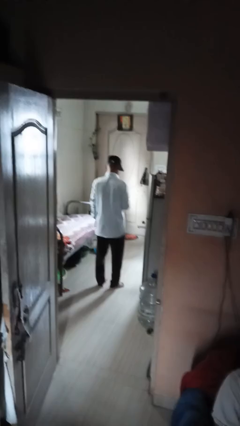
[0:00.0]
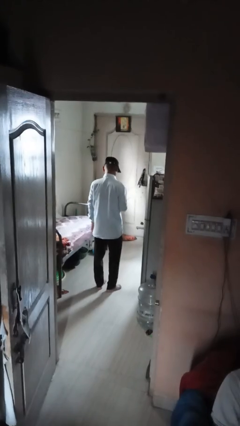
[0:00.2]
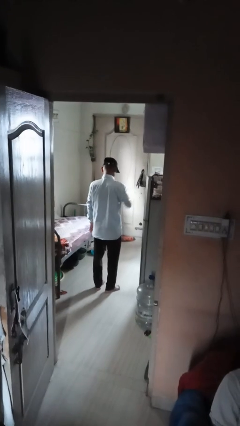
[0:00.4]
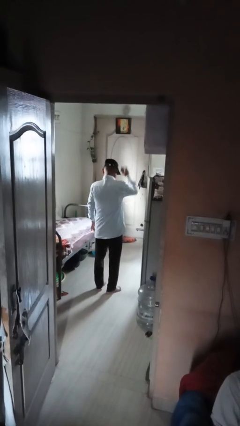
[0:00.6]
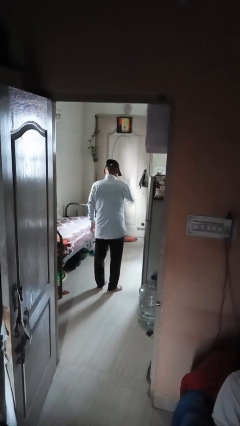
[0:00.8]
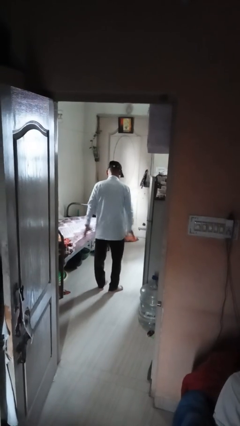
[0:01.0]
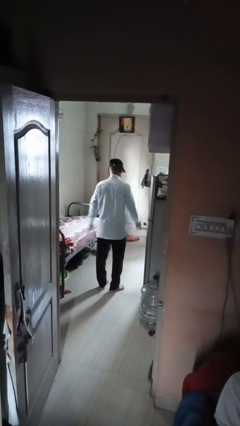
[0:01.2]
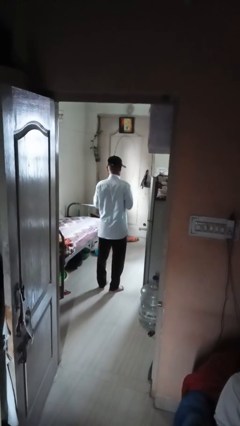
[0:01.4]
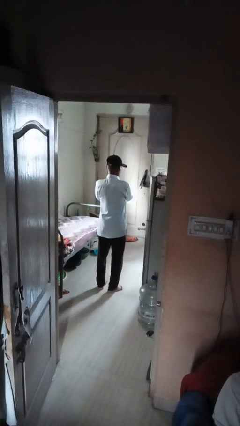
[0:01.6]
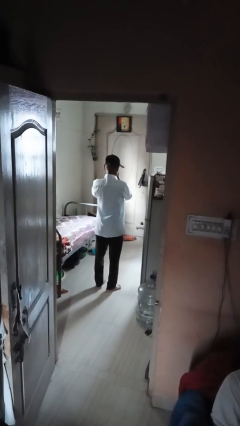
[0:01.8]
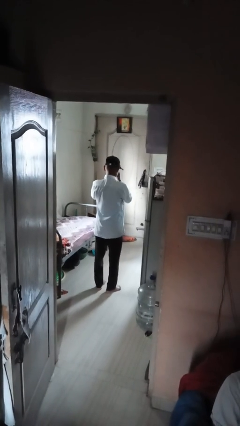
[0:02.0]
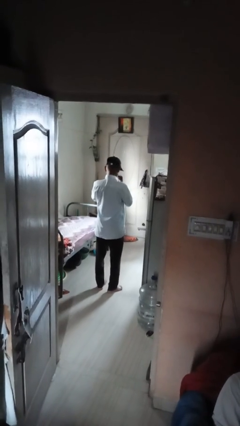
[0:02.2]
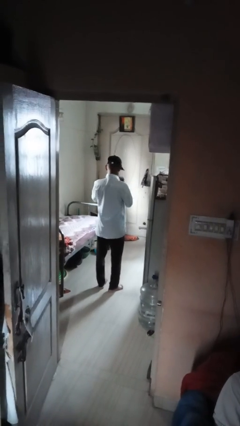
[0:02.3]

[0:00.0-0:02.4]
person bounces ball on floor

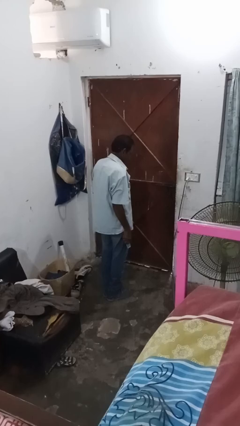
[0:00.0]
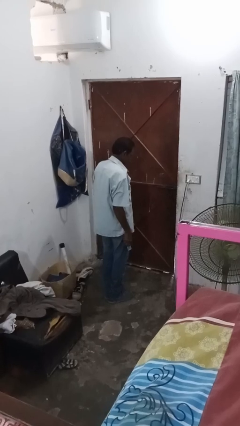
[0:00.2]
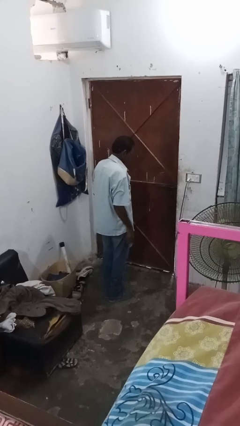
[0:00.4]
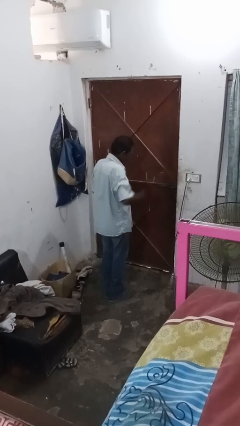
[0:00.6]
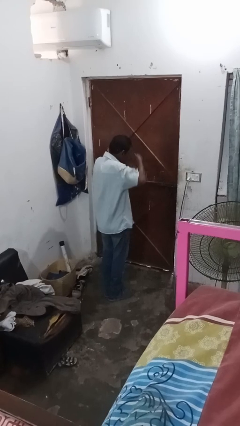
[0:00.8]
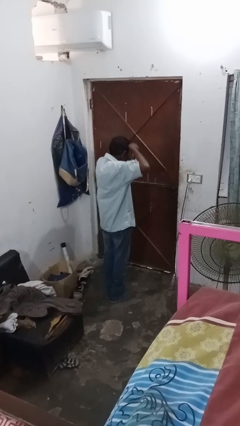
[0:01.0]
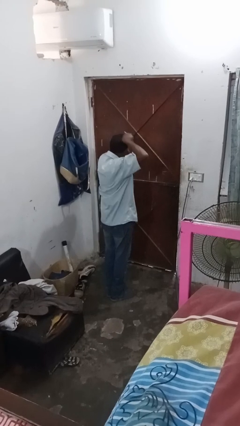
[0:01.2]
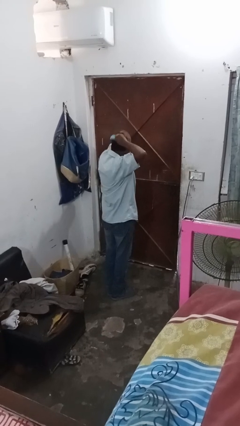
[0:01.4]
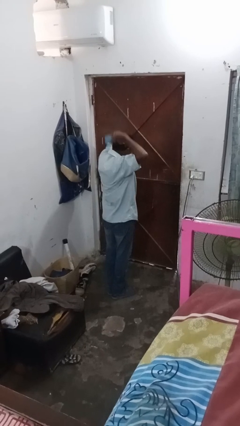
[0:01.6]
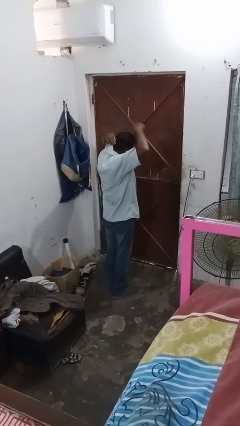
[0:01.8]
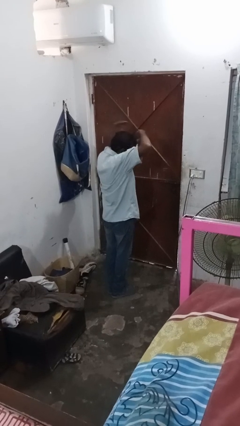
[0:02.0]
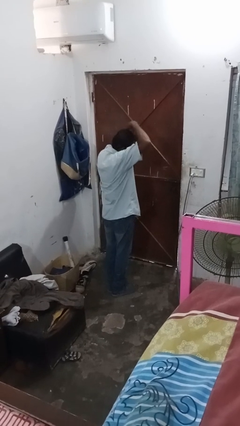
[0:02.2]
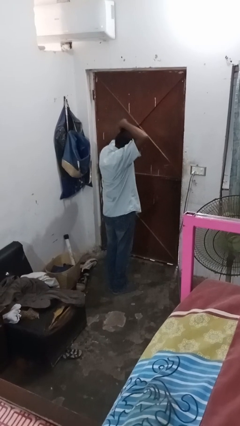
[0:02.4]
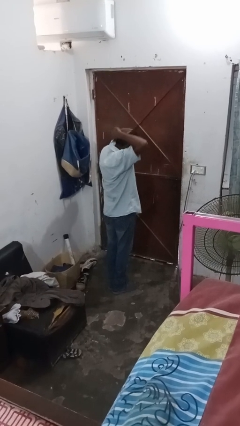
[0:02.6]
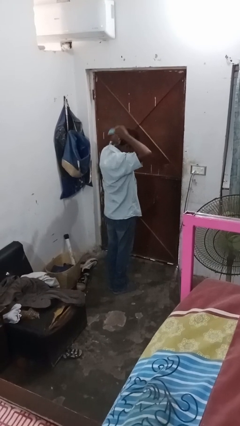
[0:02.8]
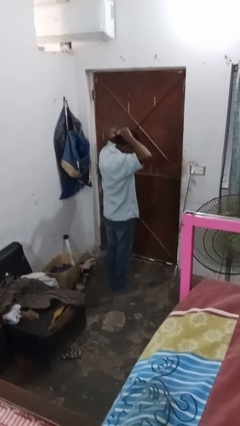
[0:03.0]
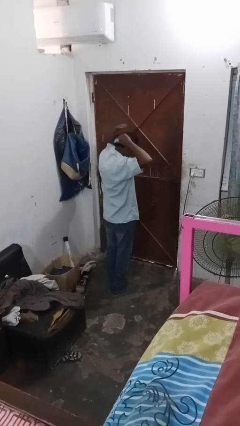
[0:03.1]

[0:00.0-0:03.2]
person brushes hair

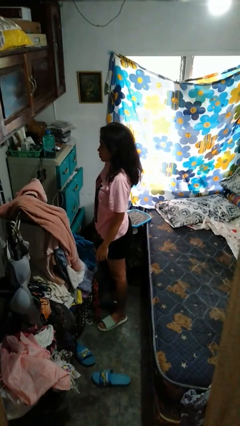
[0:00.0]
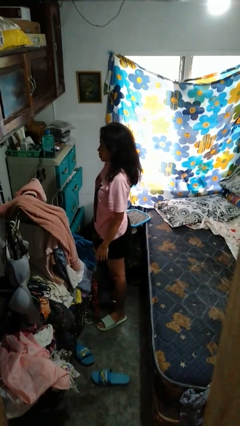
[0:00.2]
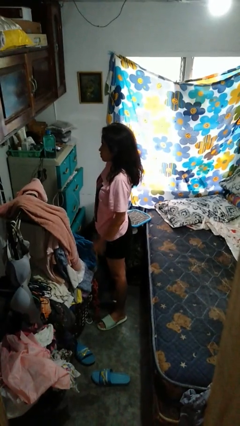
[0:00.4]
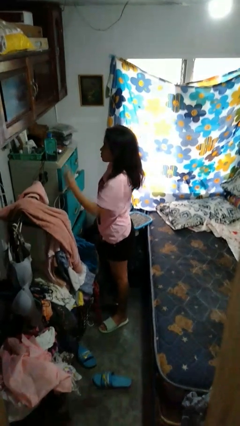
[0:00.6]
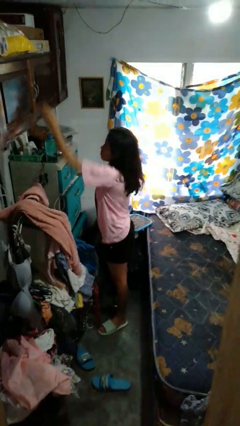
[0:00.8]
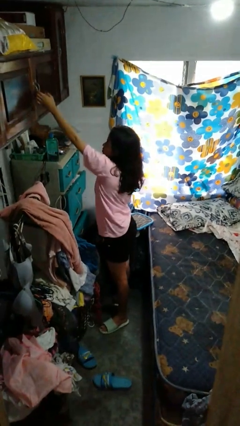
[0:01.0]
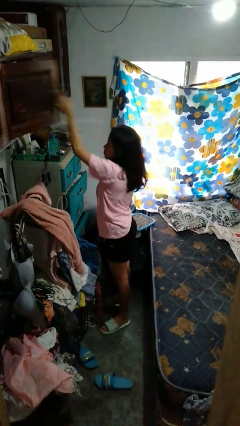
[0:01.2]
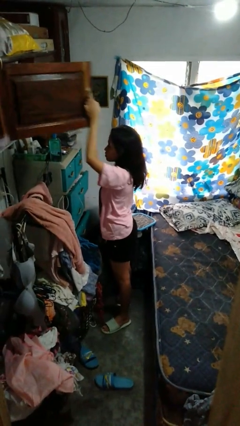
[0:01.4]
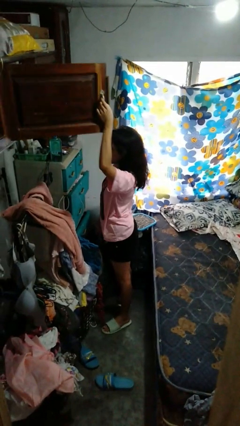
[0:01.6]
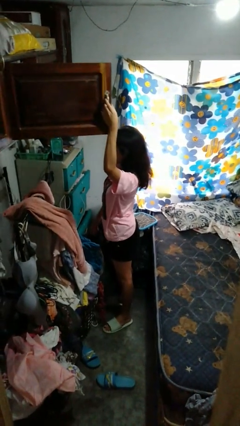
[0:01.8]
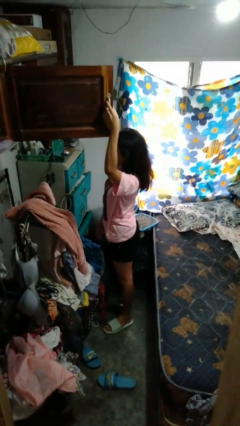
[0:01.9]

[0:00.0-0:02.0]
person opens closet door

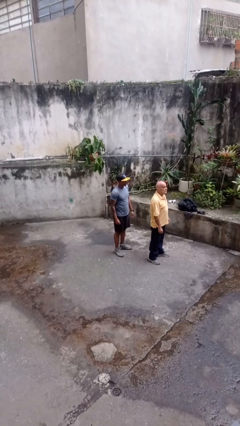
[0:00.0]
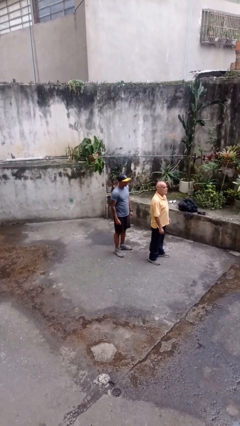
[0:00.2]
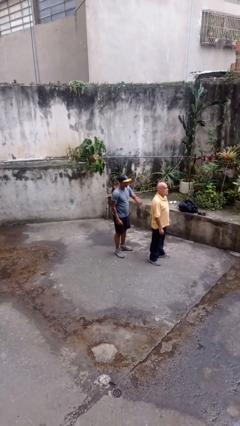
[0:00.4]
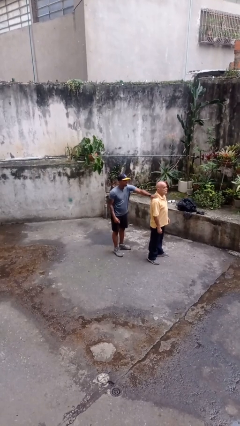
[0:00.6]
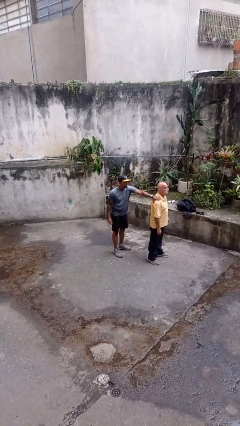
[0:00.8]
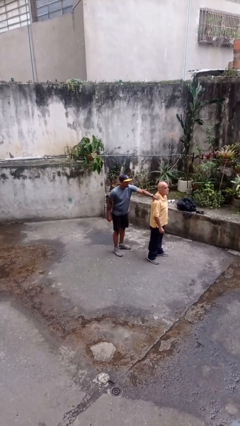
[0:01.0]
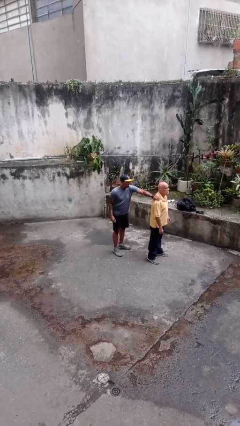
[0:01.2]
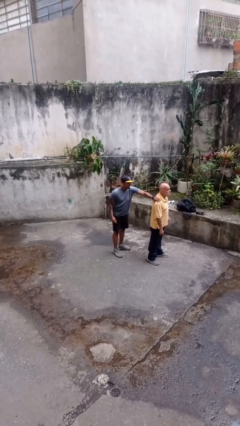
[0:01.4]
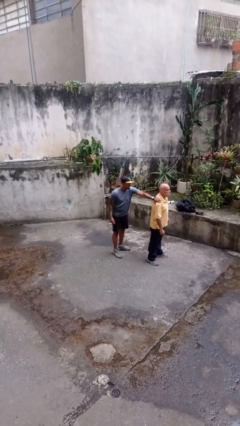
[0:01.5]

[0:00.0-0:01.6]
person grabs person by shoulder

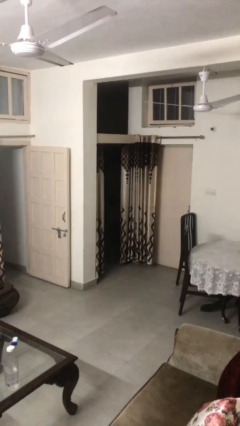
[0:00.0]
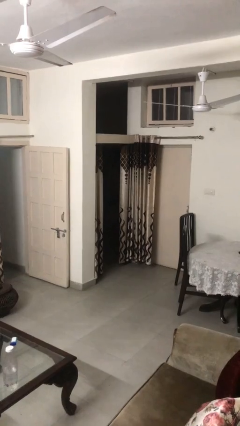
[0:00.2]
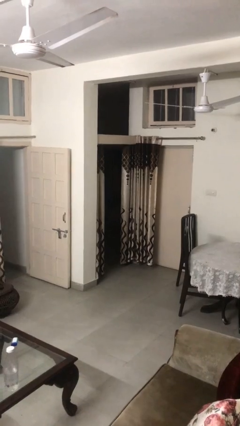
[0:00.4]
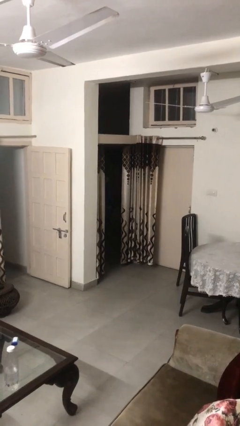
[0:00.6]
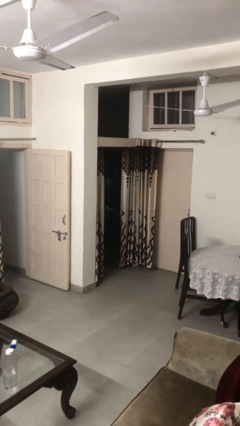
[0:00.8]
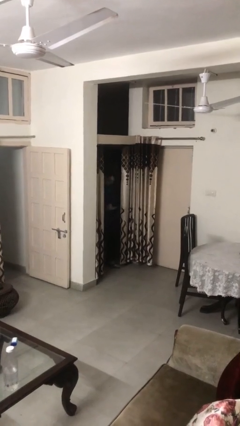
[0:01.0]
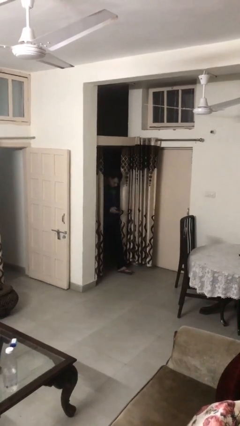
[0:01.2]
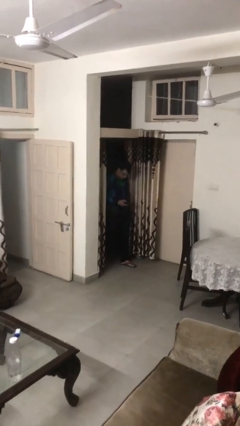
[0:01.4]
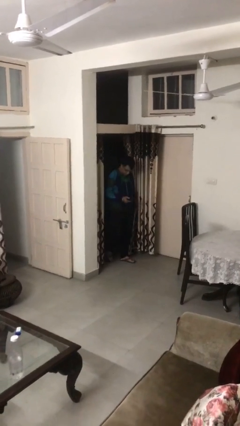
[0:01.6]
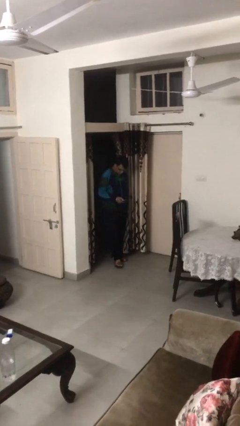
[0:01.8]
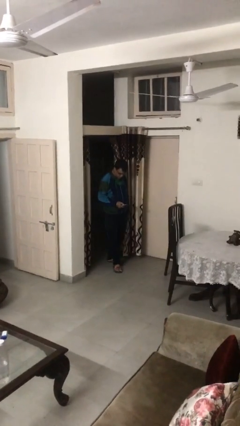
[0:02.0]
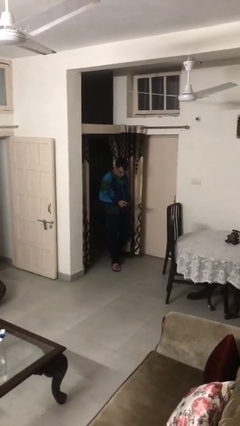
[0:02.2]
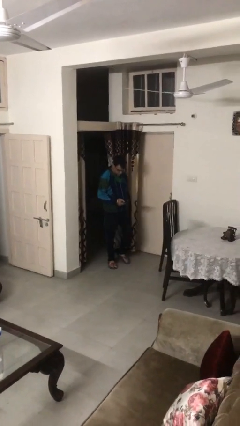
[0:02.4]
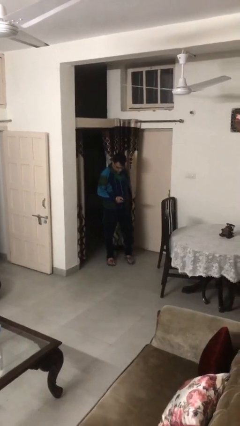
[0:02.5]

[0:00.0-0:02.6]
person enters scene through structure

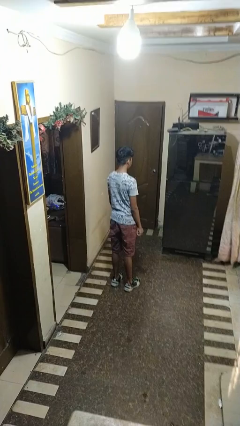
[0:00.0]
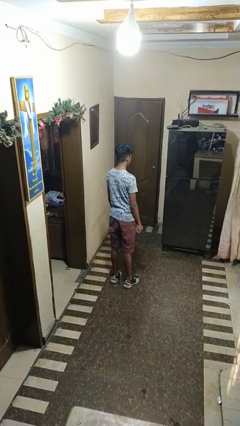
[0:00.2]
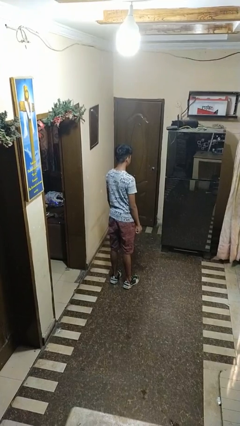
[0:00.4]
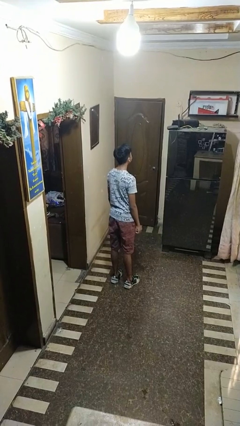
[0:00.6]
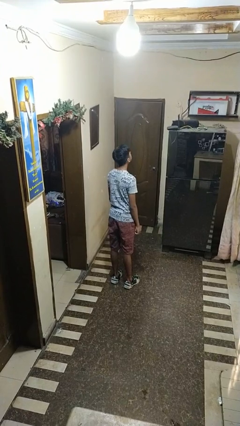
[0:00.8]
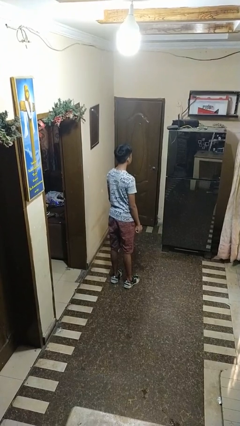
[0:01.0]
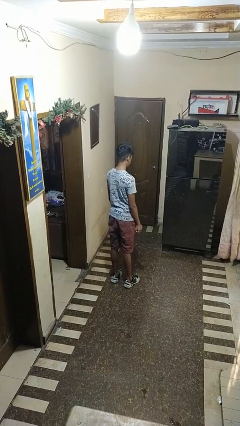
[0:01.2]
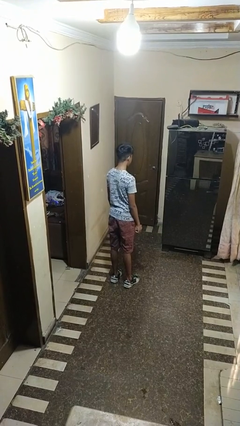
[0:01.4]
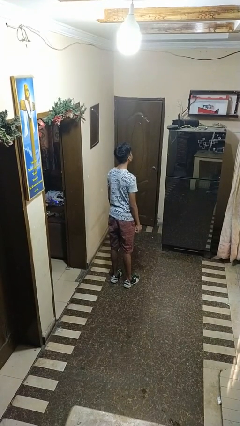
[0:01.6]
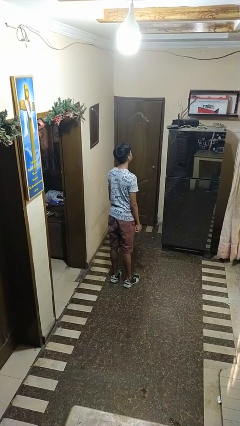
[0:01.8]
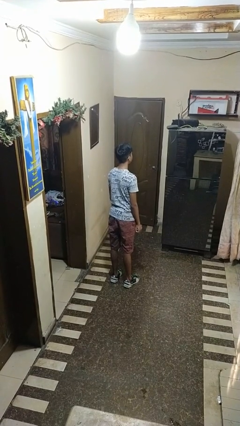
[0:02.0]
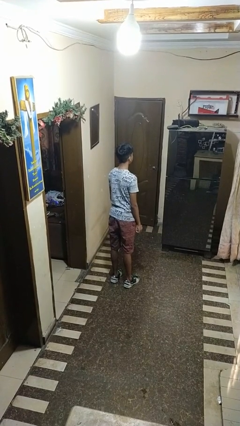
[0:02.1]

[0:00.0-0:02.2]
person shakes head

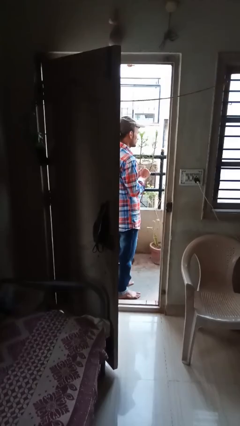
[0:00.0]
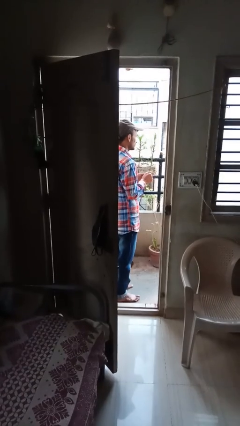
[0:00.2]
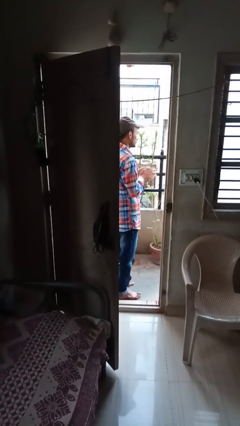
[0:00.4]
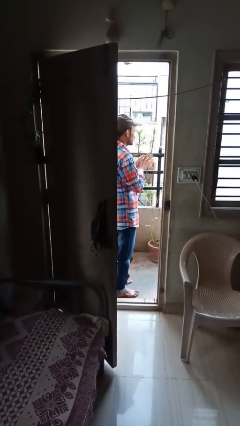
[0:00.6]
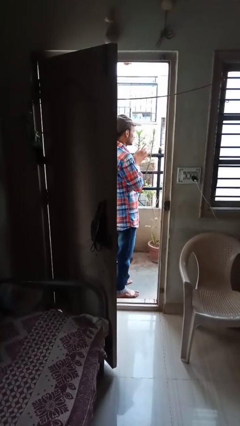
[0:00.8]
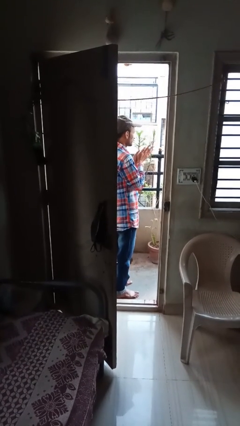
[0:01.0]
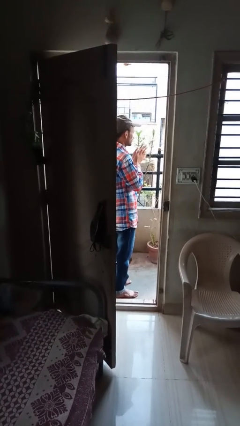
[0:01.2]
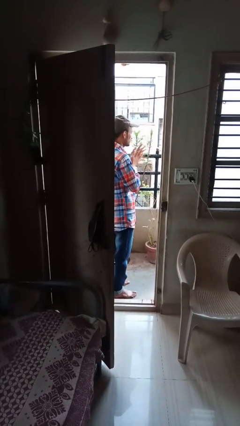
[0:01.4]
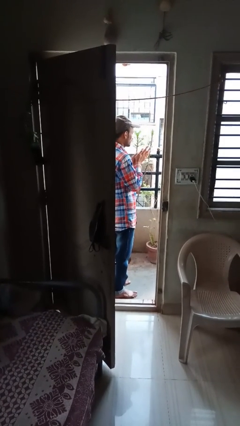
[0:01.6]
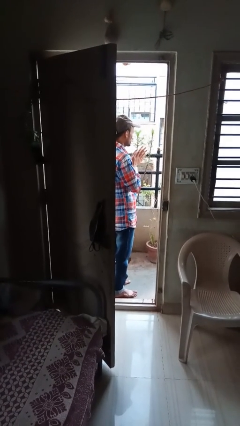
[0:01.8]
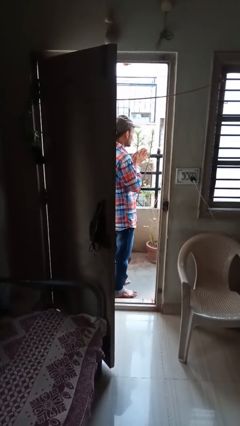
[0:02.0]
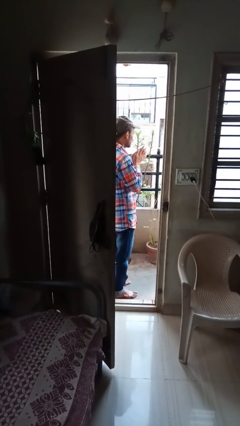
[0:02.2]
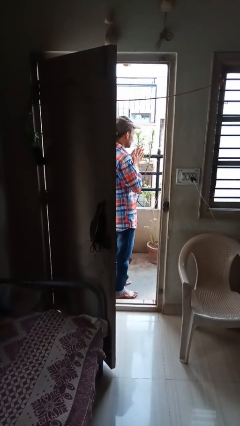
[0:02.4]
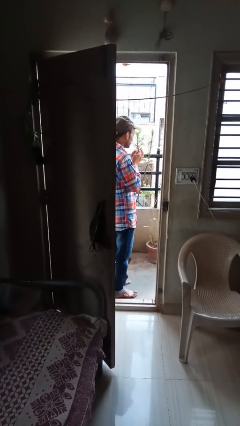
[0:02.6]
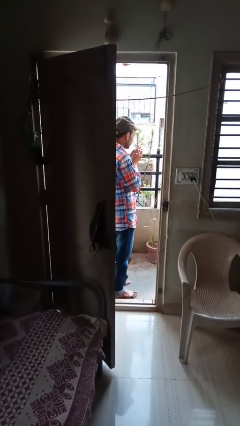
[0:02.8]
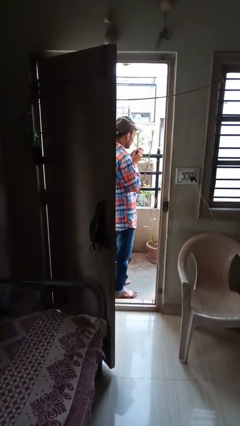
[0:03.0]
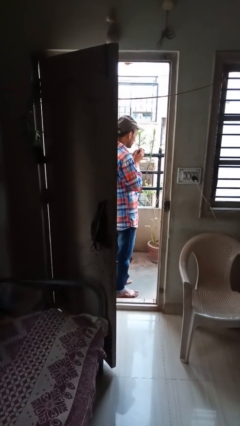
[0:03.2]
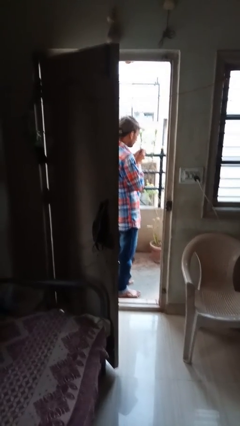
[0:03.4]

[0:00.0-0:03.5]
person blows into hands
